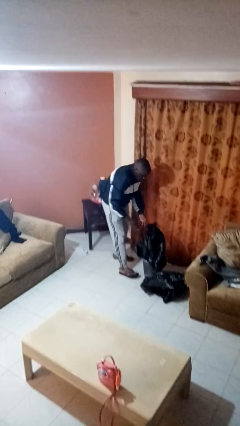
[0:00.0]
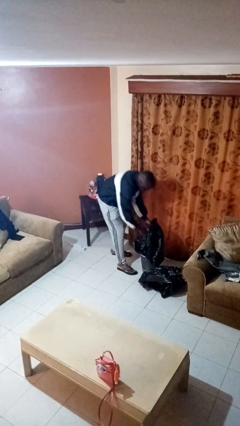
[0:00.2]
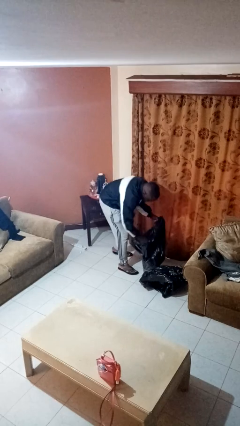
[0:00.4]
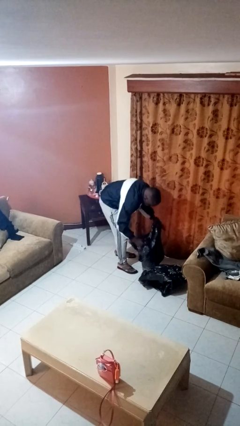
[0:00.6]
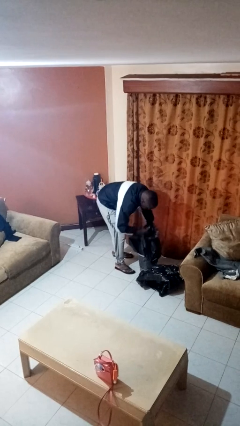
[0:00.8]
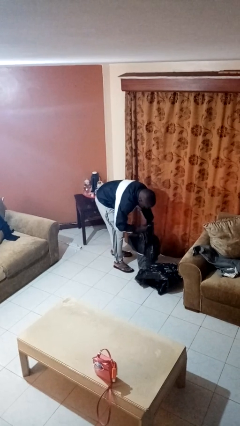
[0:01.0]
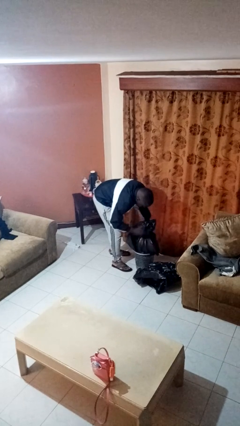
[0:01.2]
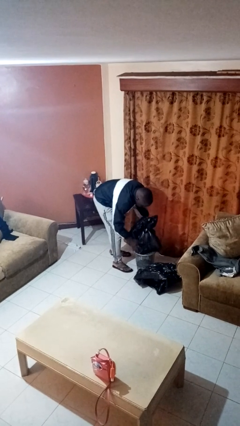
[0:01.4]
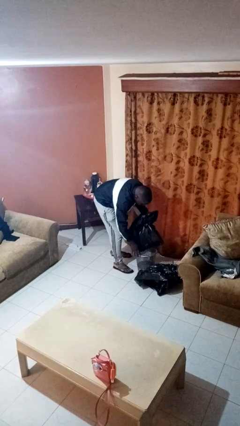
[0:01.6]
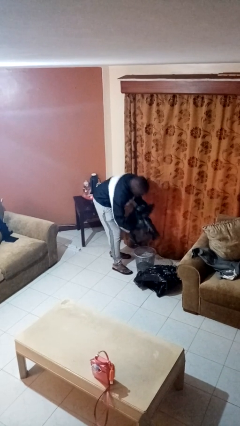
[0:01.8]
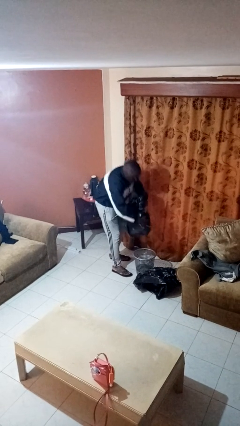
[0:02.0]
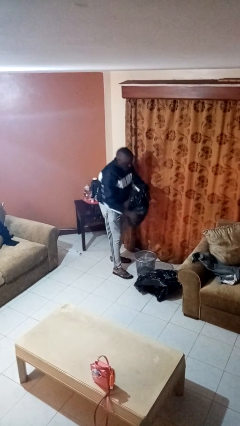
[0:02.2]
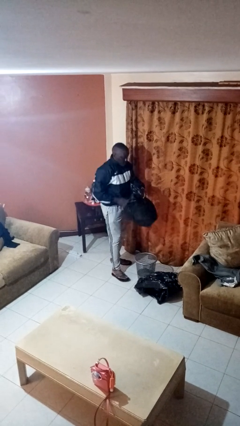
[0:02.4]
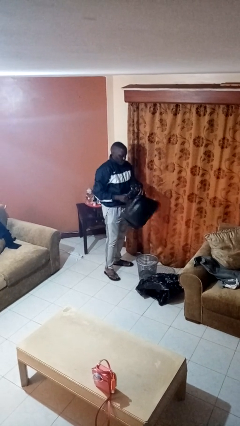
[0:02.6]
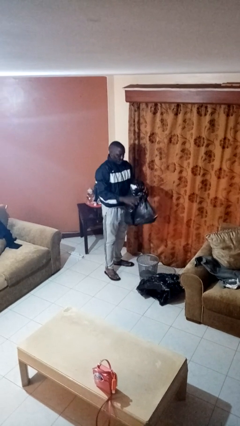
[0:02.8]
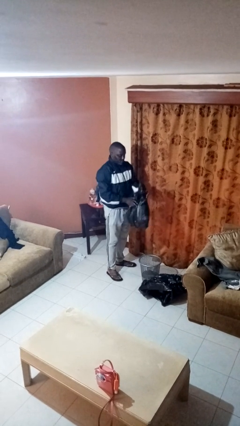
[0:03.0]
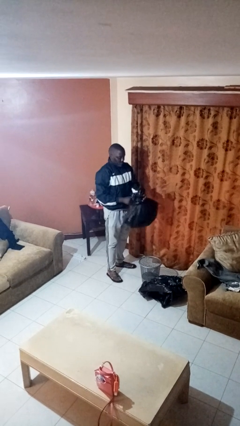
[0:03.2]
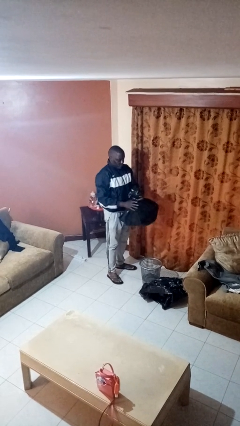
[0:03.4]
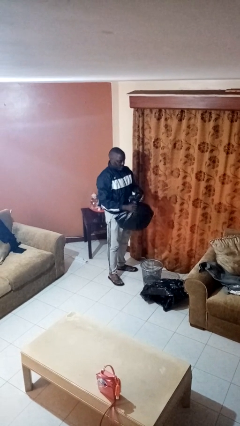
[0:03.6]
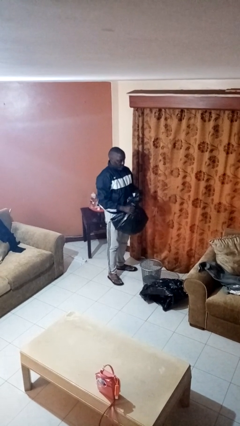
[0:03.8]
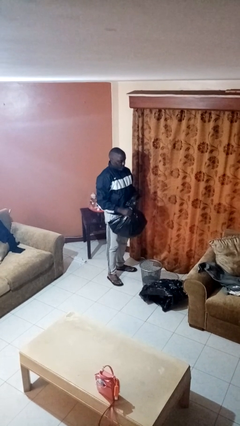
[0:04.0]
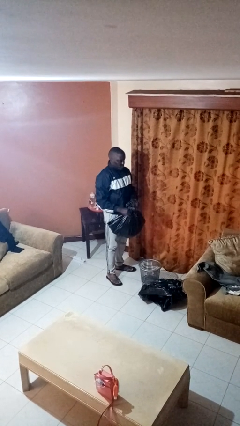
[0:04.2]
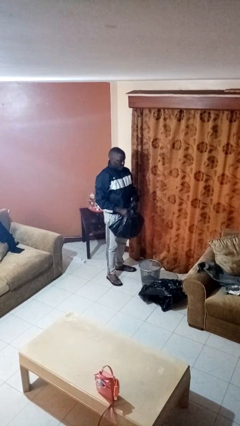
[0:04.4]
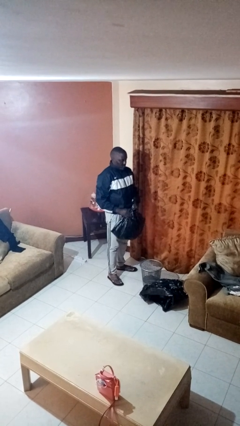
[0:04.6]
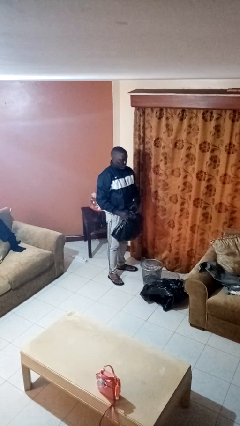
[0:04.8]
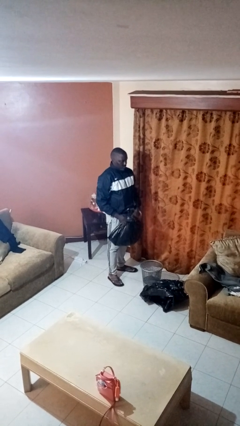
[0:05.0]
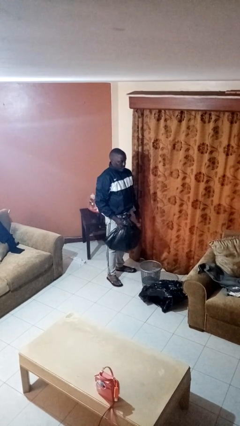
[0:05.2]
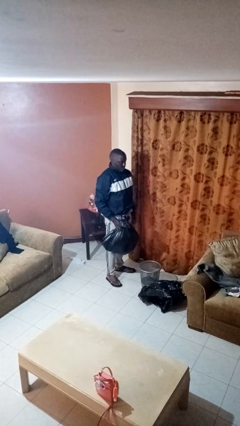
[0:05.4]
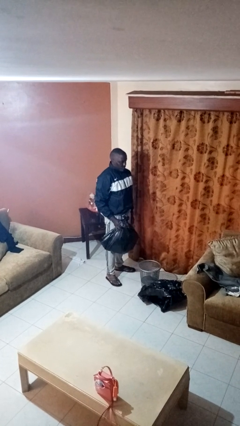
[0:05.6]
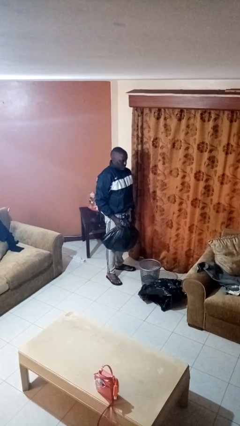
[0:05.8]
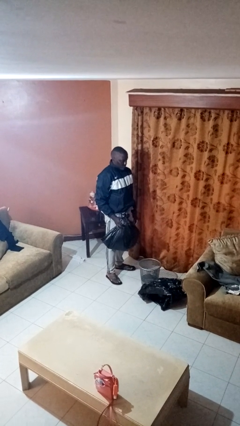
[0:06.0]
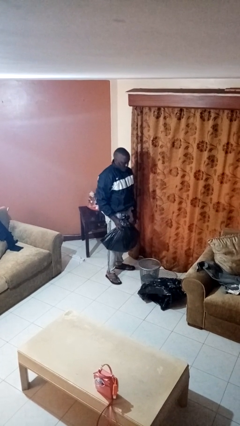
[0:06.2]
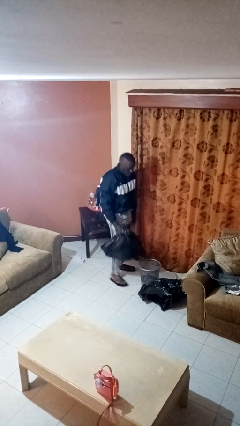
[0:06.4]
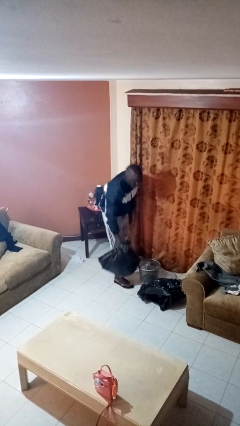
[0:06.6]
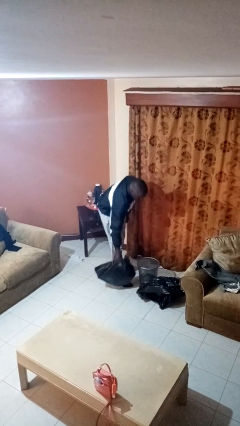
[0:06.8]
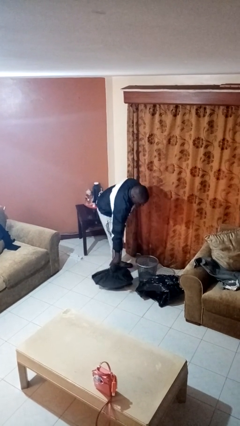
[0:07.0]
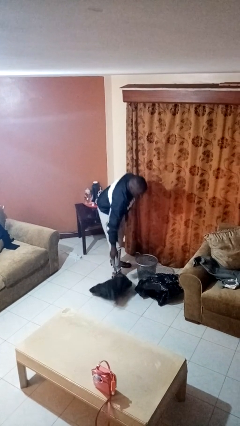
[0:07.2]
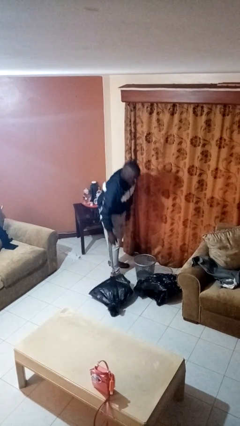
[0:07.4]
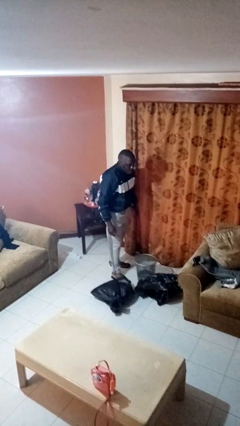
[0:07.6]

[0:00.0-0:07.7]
person removes trashbag from trashcan

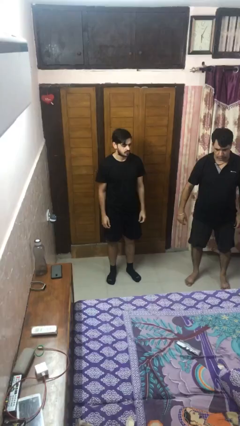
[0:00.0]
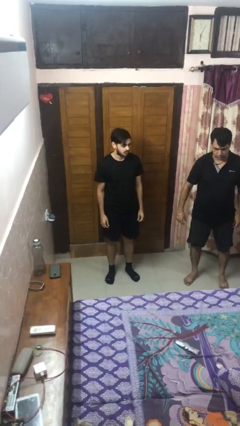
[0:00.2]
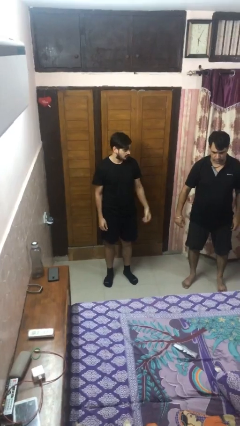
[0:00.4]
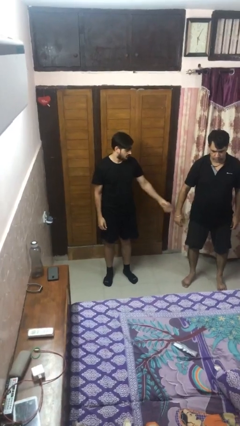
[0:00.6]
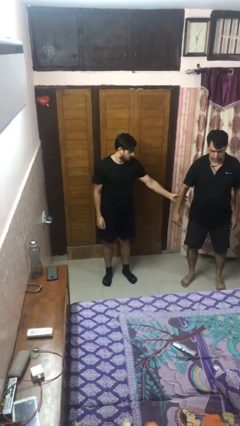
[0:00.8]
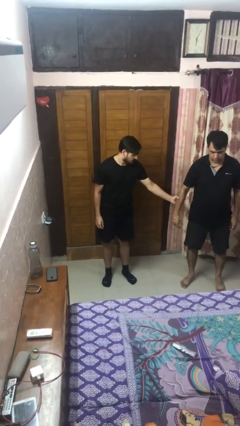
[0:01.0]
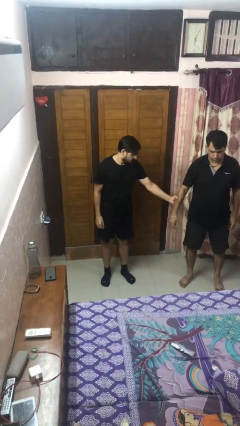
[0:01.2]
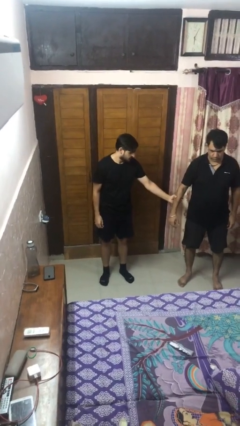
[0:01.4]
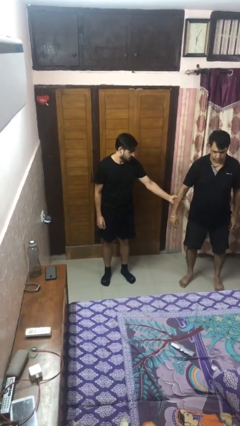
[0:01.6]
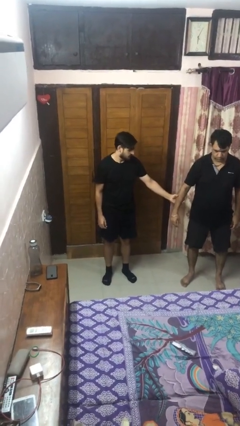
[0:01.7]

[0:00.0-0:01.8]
person grabs person by forearm

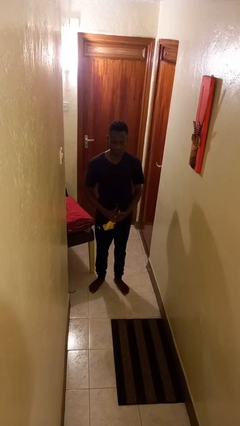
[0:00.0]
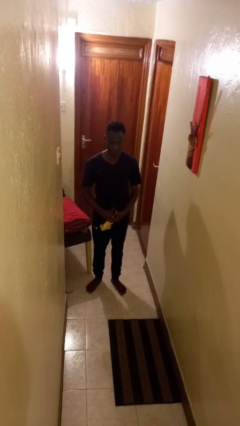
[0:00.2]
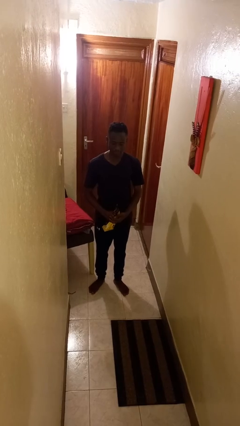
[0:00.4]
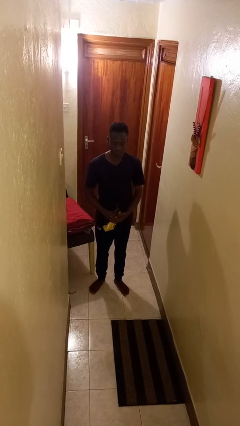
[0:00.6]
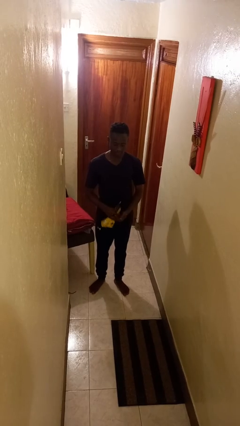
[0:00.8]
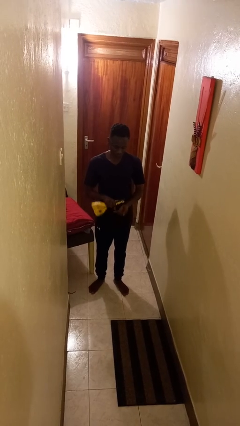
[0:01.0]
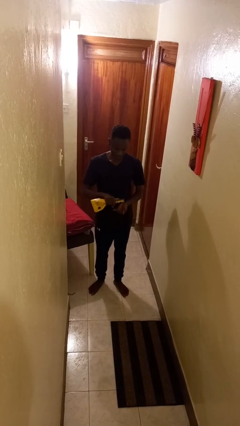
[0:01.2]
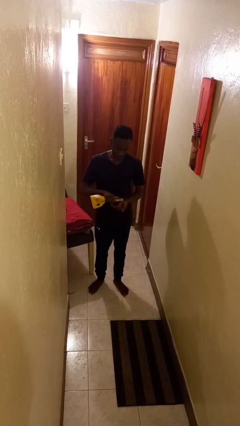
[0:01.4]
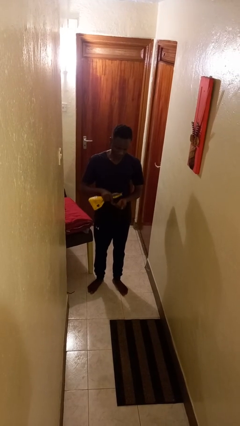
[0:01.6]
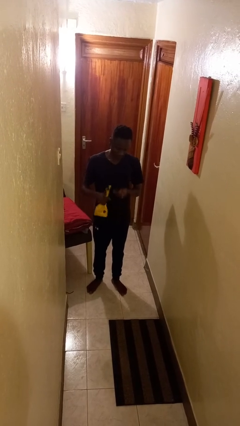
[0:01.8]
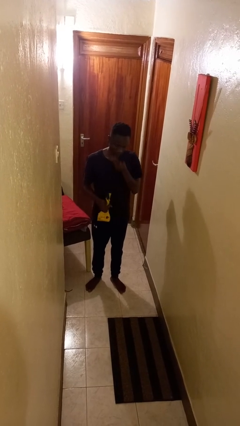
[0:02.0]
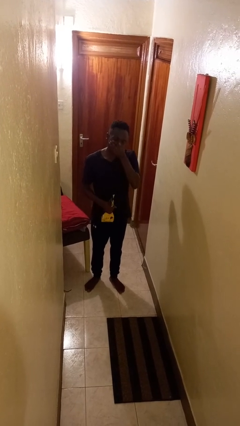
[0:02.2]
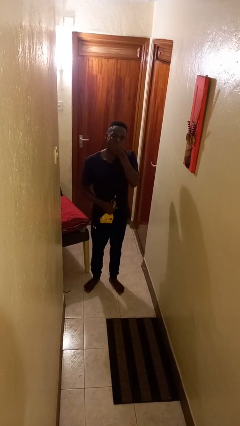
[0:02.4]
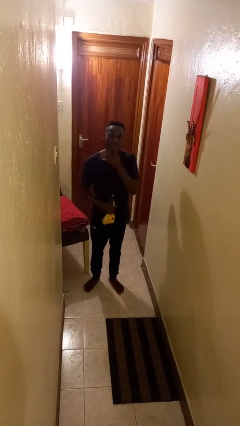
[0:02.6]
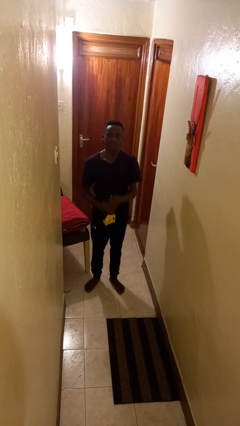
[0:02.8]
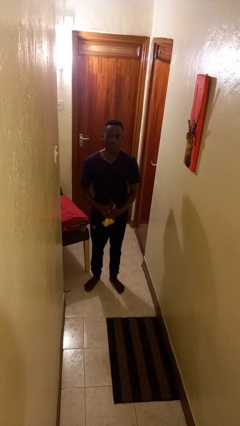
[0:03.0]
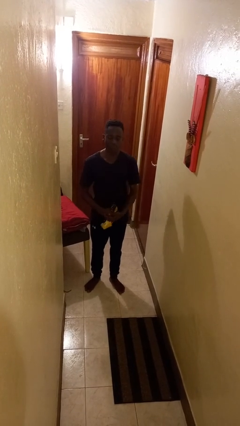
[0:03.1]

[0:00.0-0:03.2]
person eats snack from bag

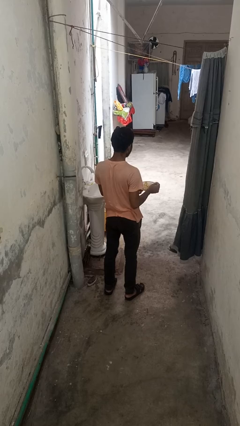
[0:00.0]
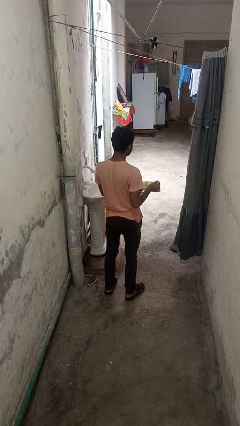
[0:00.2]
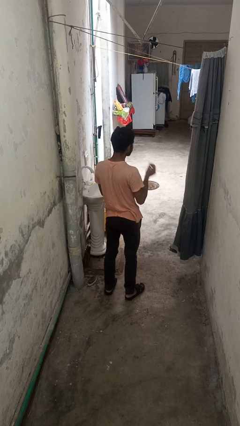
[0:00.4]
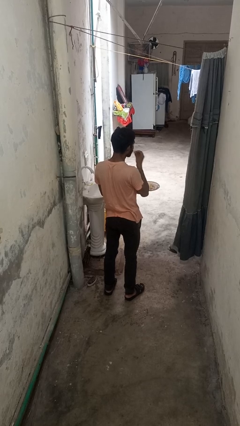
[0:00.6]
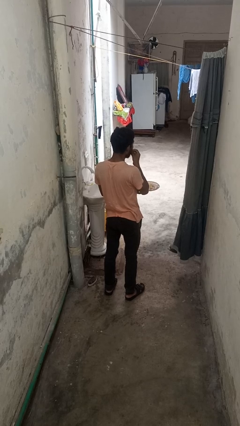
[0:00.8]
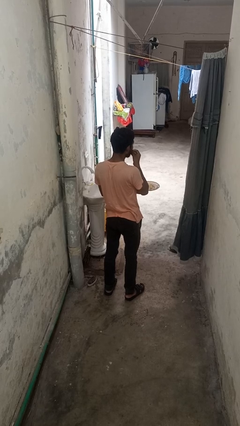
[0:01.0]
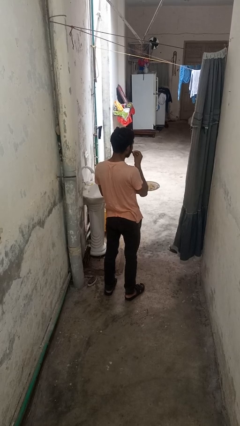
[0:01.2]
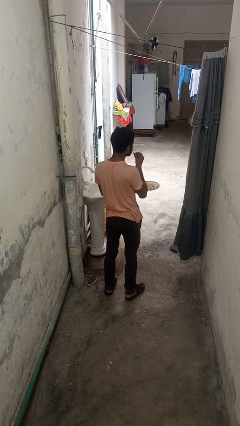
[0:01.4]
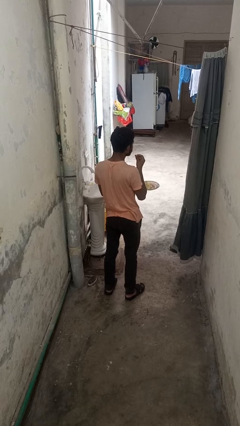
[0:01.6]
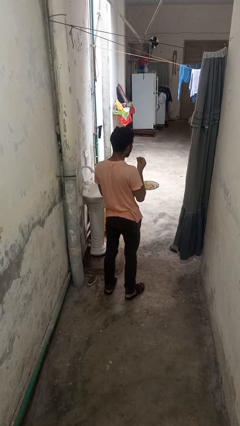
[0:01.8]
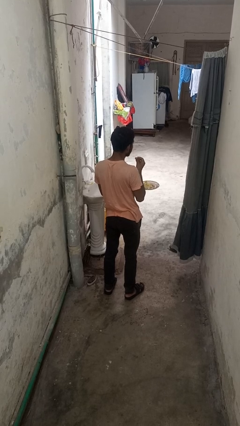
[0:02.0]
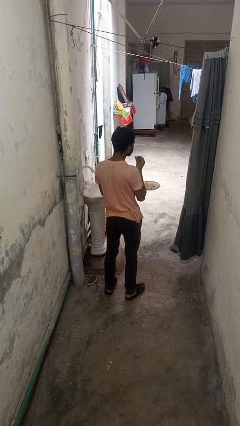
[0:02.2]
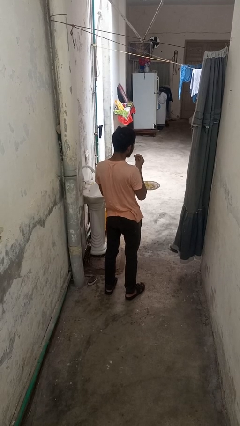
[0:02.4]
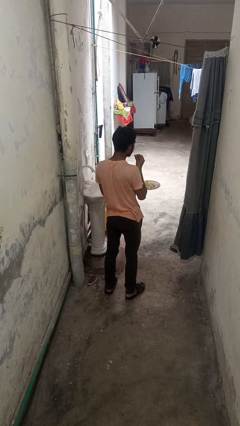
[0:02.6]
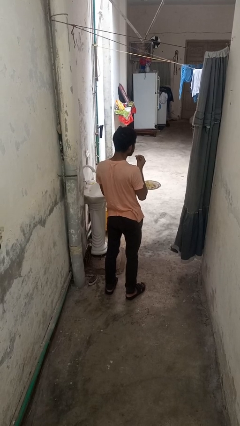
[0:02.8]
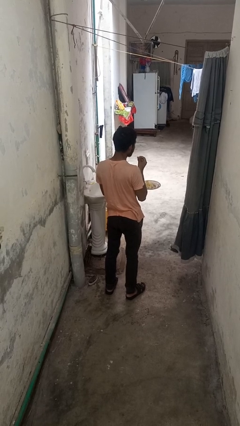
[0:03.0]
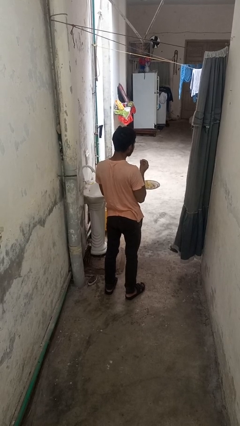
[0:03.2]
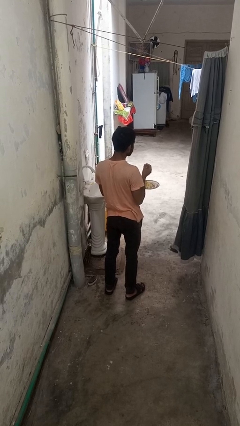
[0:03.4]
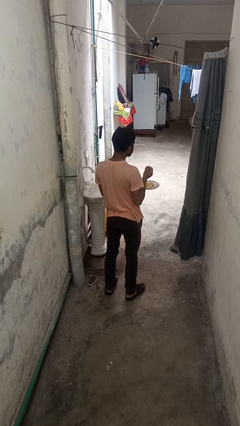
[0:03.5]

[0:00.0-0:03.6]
person eats with hands

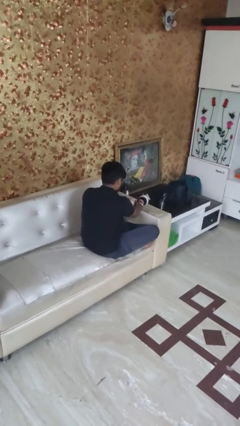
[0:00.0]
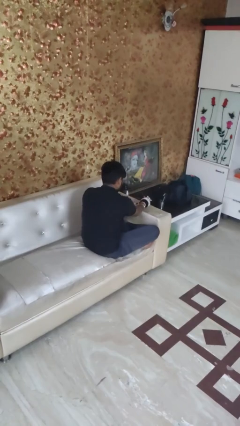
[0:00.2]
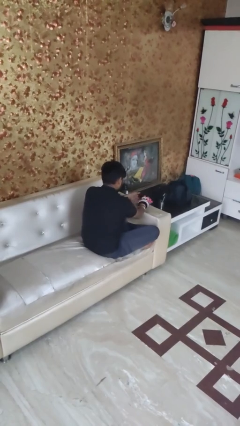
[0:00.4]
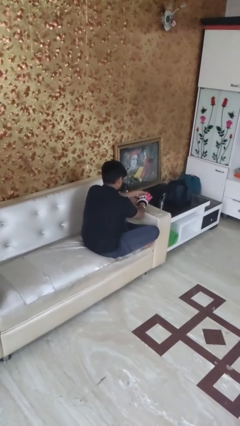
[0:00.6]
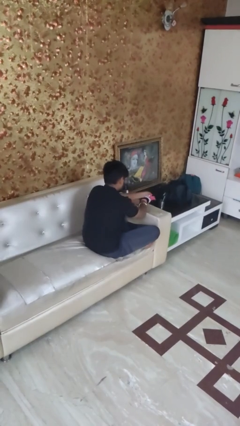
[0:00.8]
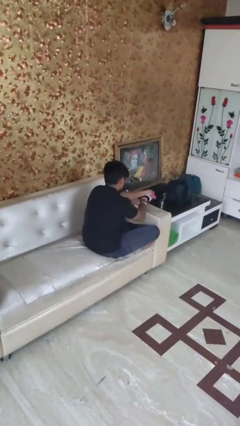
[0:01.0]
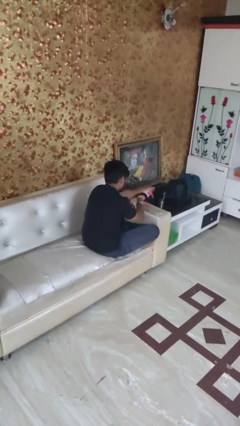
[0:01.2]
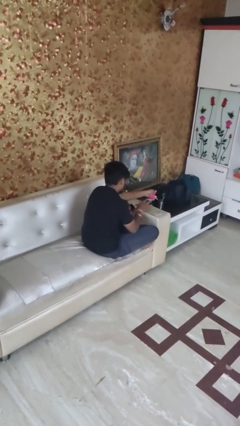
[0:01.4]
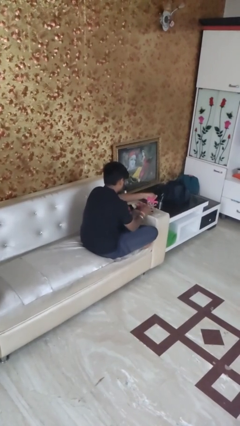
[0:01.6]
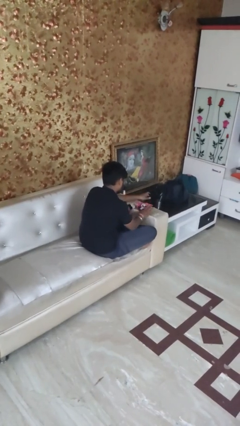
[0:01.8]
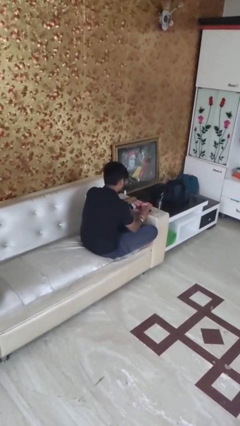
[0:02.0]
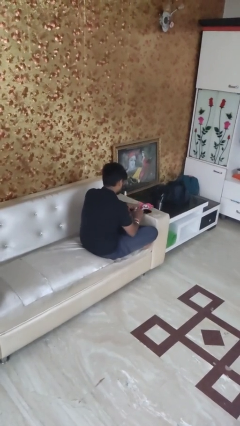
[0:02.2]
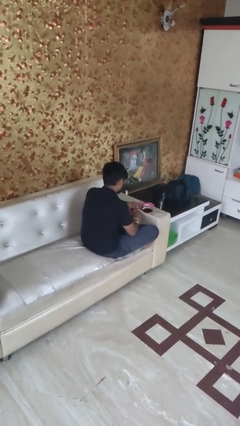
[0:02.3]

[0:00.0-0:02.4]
person takes off gloves
